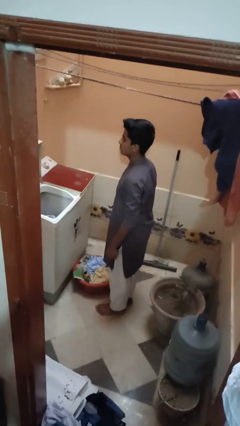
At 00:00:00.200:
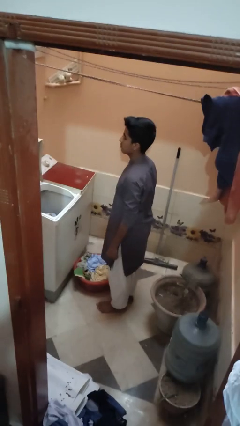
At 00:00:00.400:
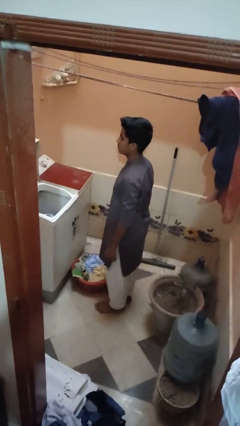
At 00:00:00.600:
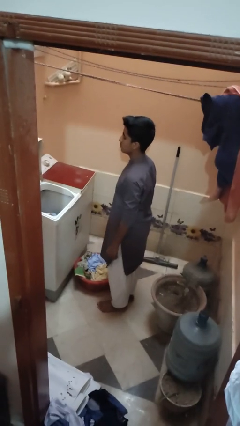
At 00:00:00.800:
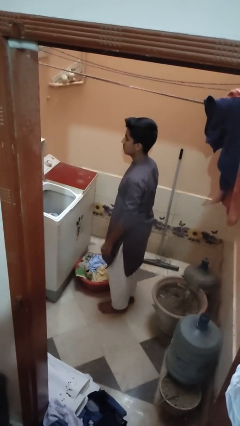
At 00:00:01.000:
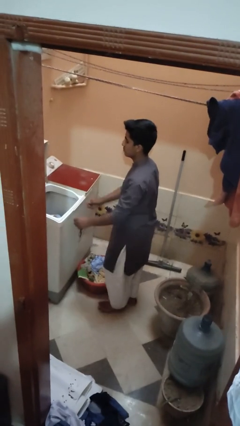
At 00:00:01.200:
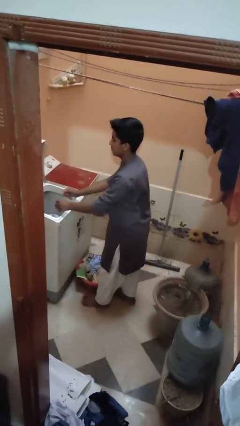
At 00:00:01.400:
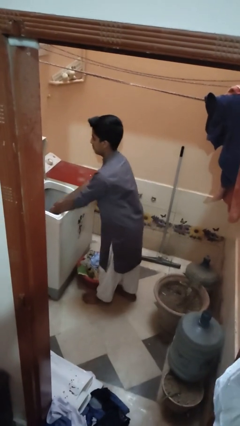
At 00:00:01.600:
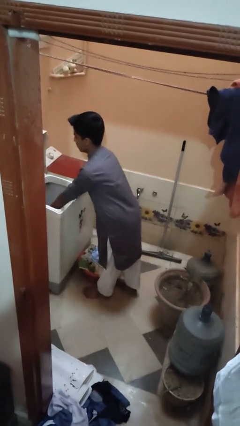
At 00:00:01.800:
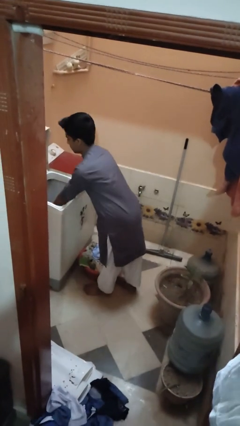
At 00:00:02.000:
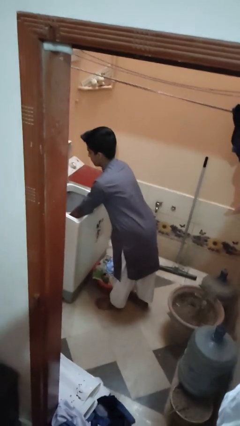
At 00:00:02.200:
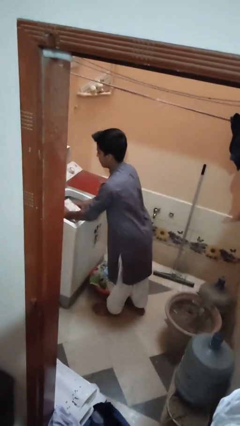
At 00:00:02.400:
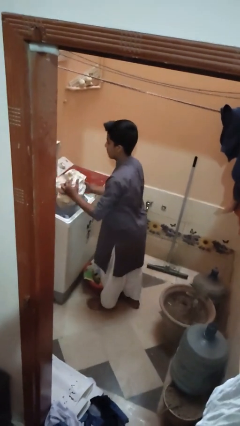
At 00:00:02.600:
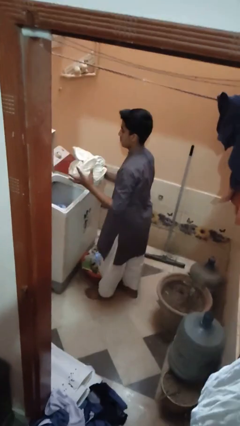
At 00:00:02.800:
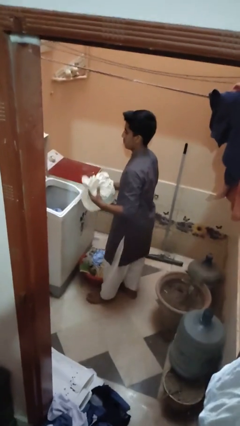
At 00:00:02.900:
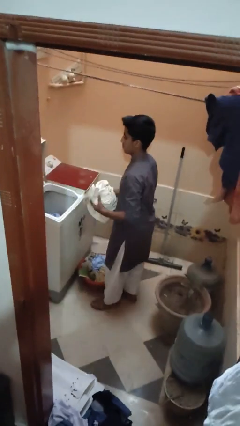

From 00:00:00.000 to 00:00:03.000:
person unloads clotheswasher

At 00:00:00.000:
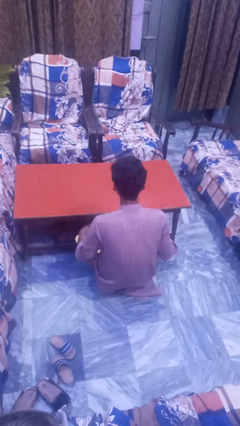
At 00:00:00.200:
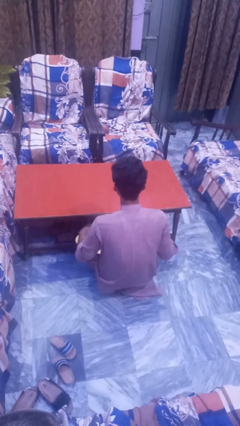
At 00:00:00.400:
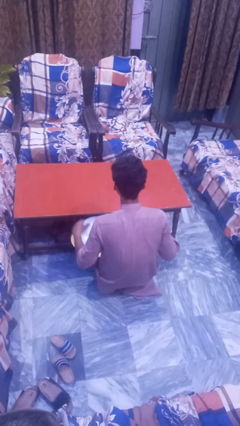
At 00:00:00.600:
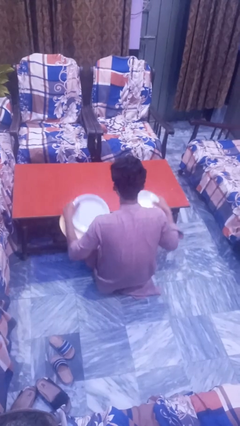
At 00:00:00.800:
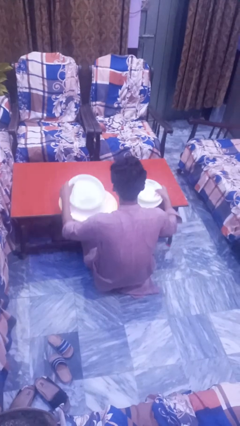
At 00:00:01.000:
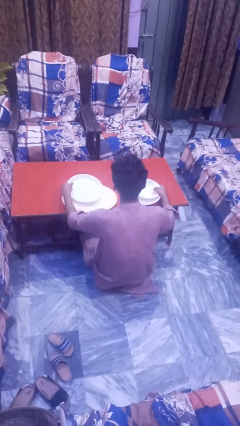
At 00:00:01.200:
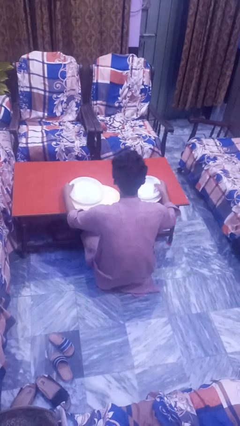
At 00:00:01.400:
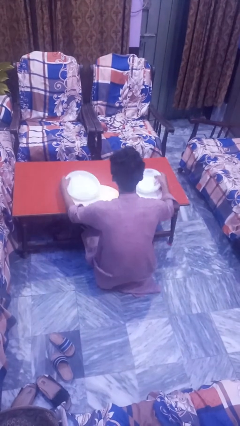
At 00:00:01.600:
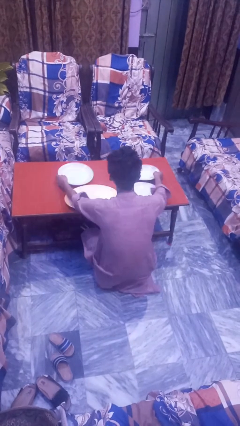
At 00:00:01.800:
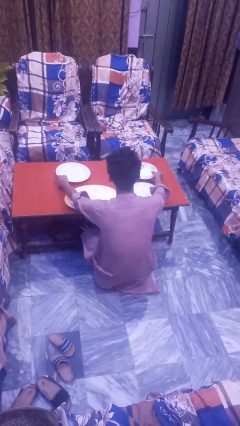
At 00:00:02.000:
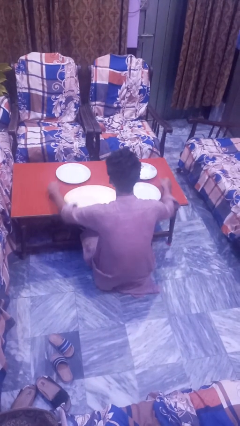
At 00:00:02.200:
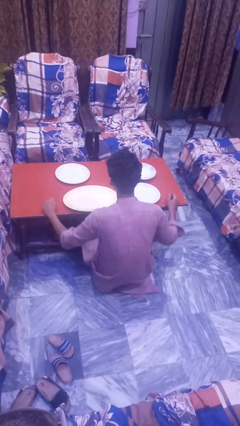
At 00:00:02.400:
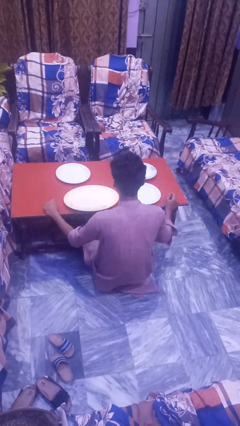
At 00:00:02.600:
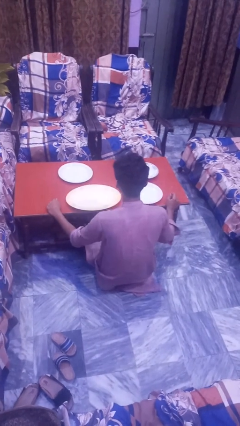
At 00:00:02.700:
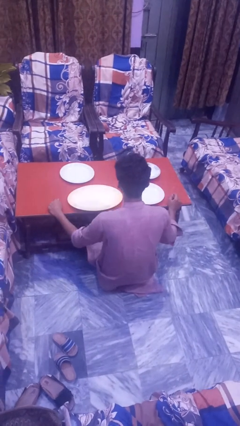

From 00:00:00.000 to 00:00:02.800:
person sets table

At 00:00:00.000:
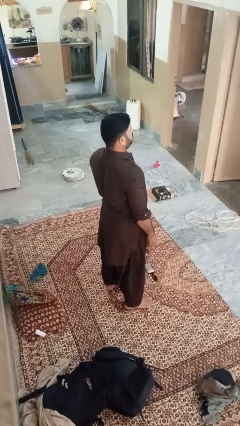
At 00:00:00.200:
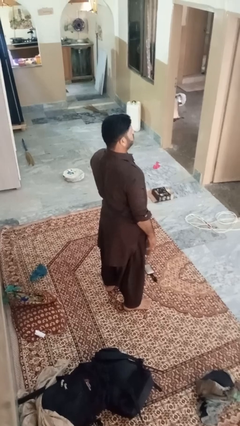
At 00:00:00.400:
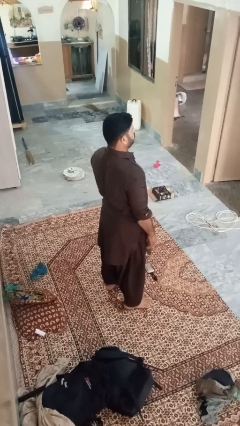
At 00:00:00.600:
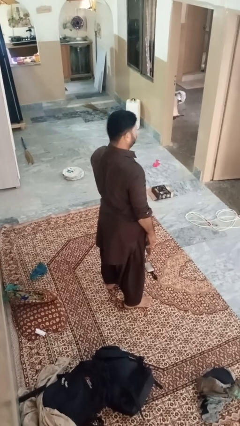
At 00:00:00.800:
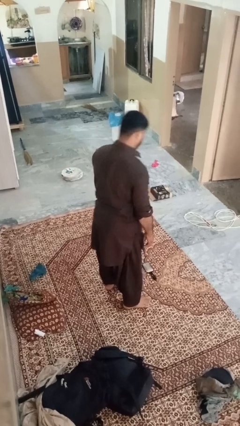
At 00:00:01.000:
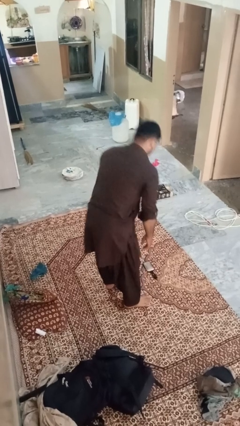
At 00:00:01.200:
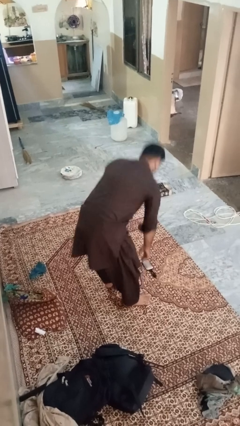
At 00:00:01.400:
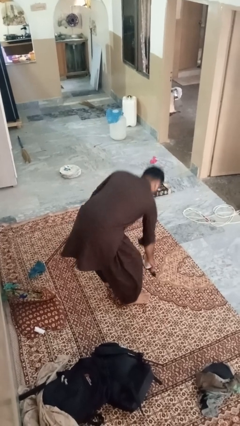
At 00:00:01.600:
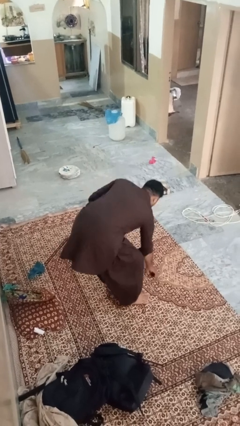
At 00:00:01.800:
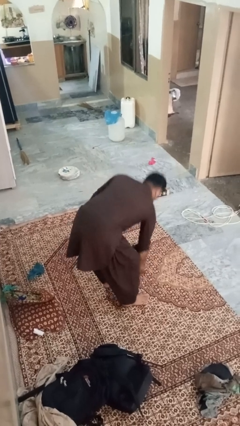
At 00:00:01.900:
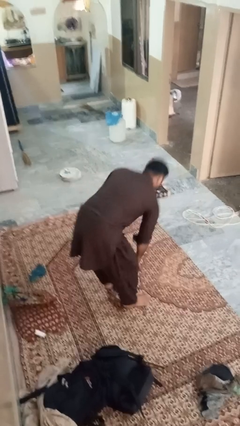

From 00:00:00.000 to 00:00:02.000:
person picks up object from floor

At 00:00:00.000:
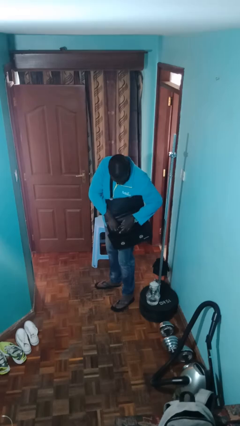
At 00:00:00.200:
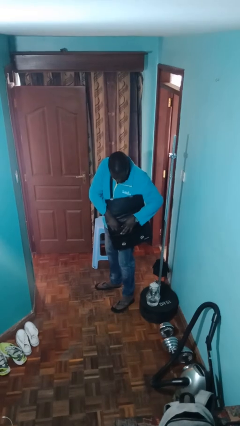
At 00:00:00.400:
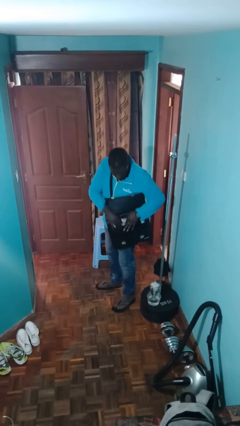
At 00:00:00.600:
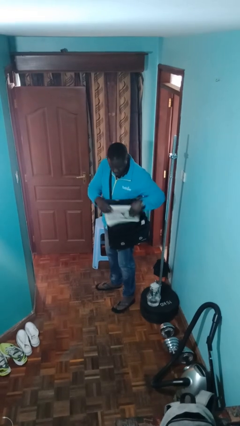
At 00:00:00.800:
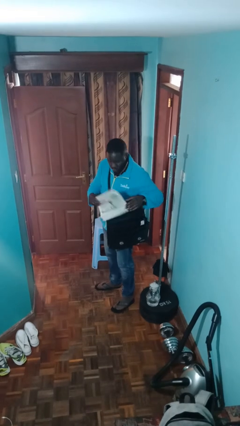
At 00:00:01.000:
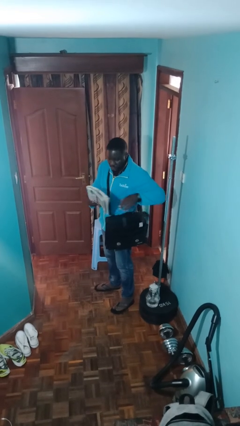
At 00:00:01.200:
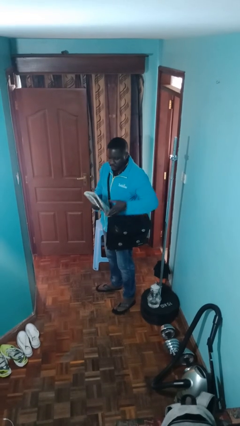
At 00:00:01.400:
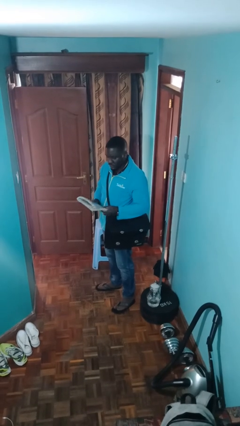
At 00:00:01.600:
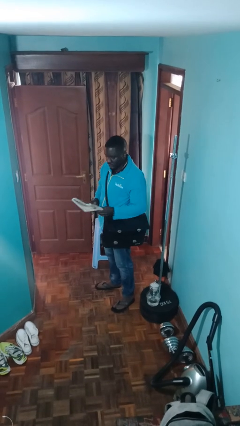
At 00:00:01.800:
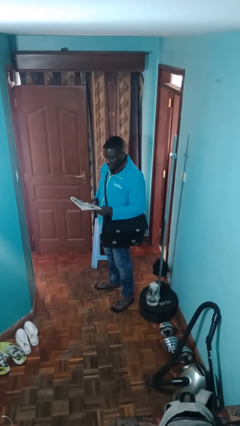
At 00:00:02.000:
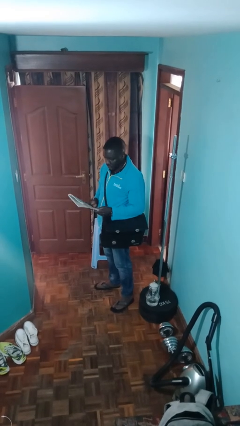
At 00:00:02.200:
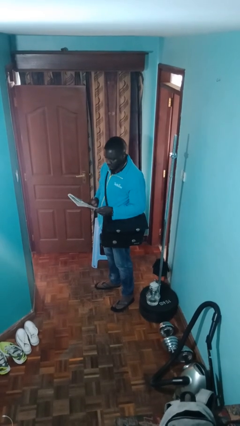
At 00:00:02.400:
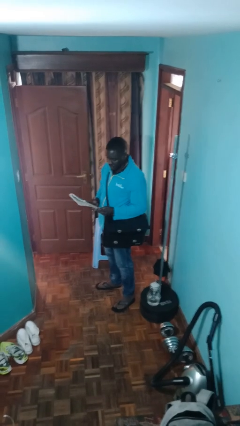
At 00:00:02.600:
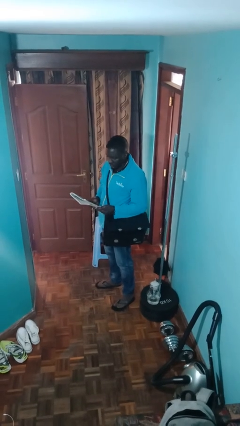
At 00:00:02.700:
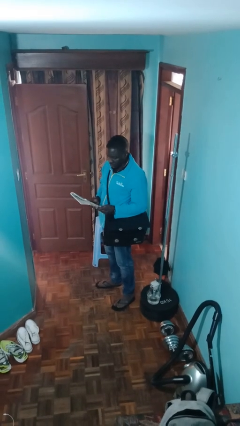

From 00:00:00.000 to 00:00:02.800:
person takes object from purse

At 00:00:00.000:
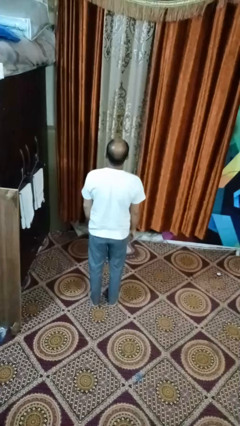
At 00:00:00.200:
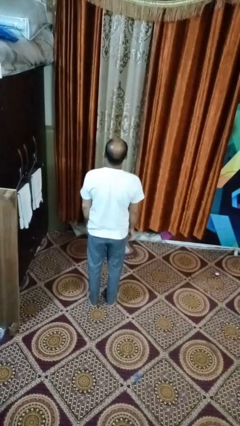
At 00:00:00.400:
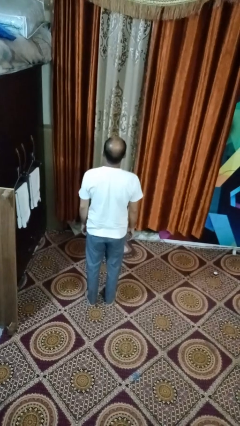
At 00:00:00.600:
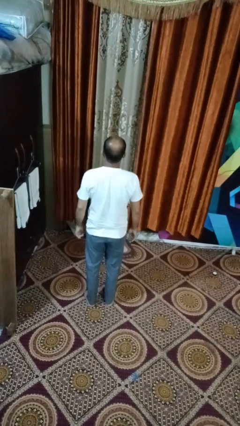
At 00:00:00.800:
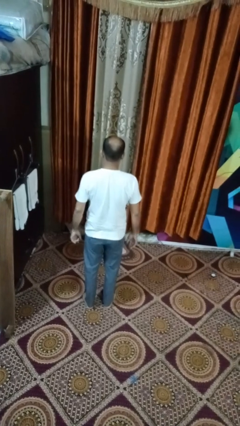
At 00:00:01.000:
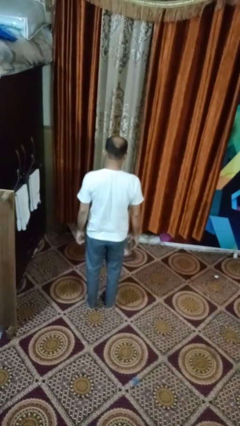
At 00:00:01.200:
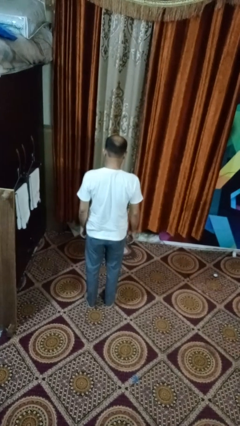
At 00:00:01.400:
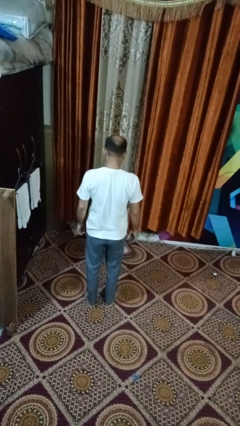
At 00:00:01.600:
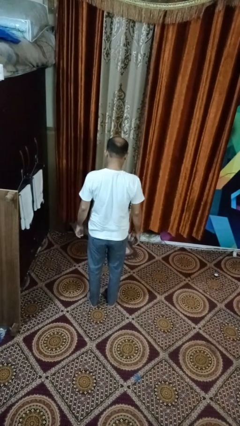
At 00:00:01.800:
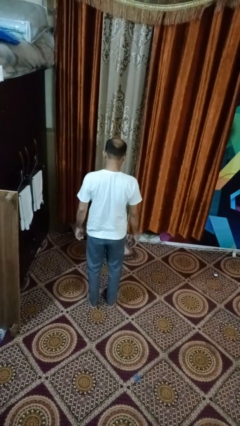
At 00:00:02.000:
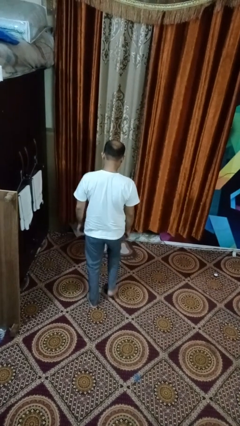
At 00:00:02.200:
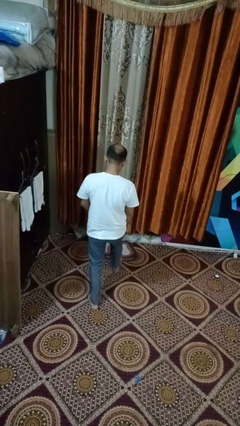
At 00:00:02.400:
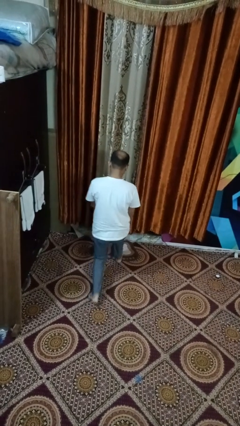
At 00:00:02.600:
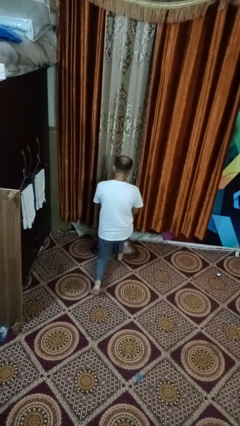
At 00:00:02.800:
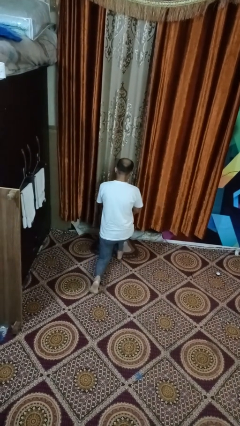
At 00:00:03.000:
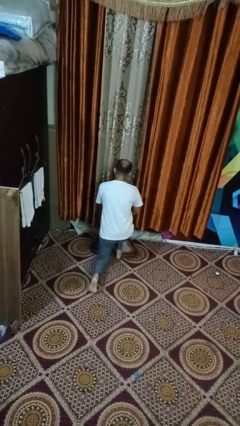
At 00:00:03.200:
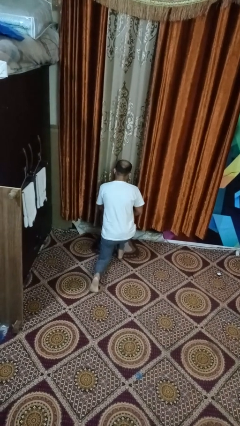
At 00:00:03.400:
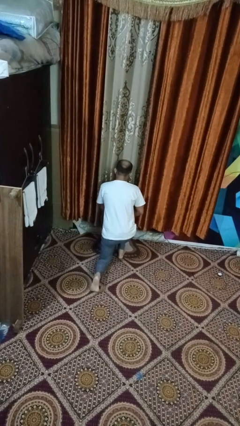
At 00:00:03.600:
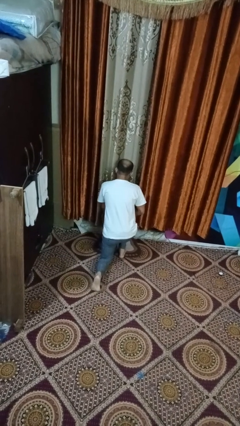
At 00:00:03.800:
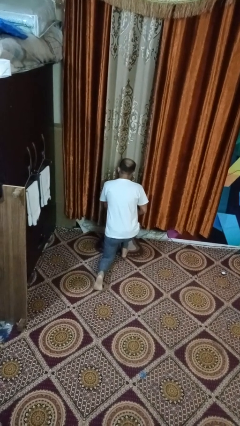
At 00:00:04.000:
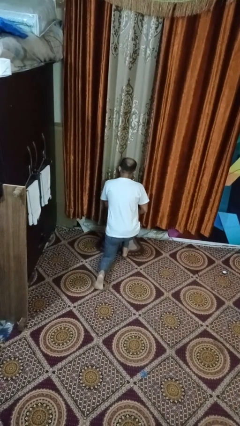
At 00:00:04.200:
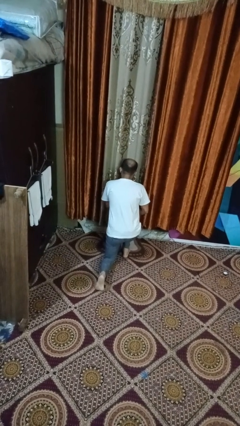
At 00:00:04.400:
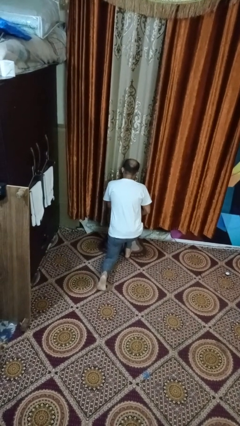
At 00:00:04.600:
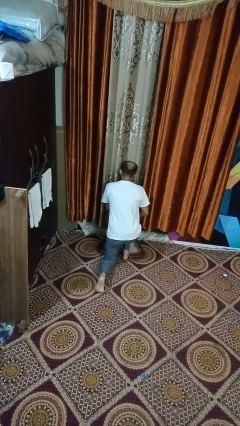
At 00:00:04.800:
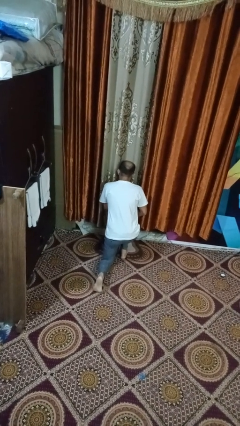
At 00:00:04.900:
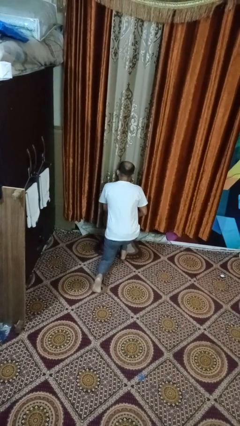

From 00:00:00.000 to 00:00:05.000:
person kneels

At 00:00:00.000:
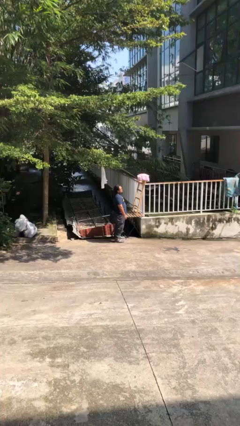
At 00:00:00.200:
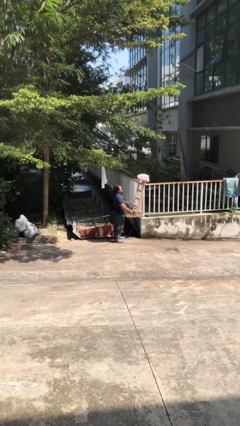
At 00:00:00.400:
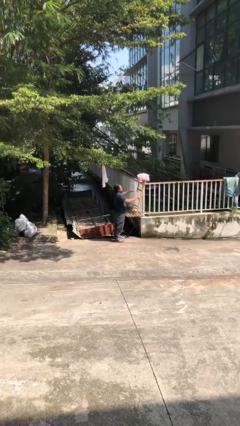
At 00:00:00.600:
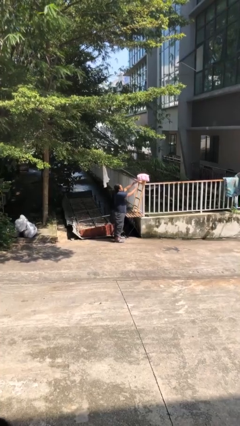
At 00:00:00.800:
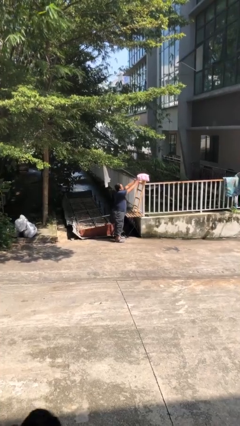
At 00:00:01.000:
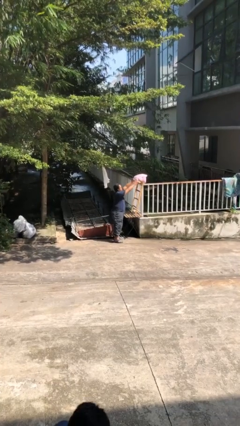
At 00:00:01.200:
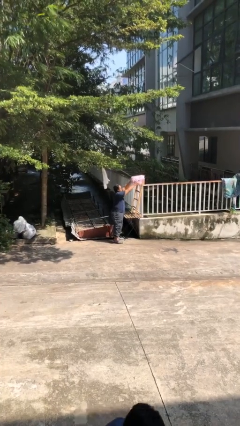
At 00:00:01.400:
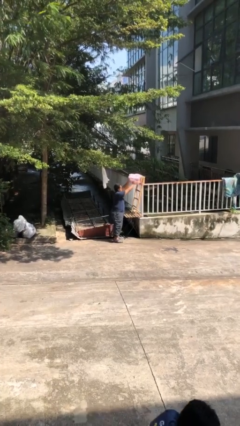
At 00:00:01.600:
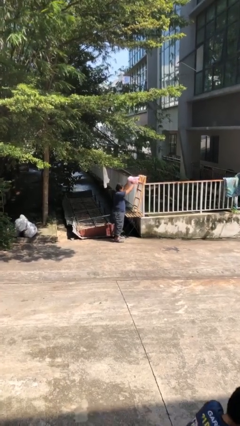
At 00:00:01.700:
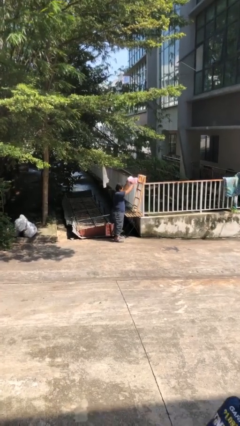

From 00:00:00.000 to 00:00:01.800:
person picks up object from shelf
